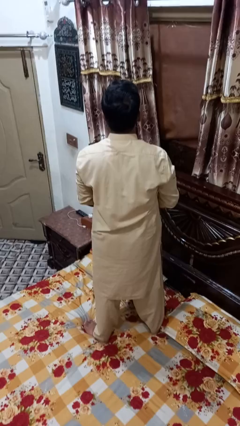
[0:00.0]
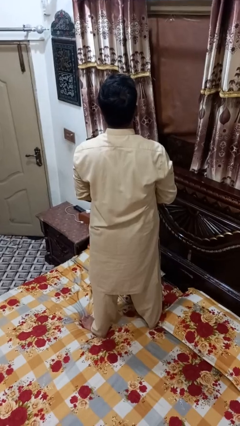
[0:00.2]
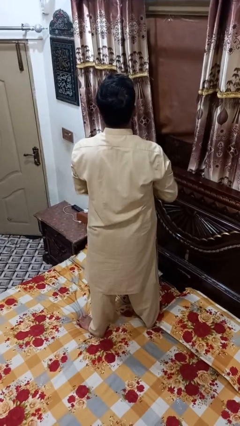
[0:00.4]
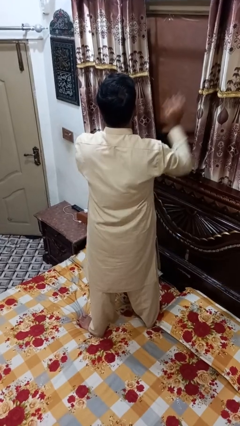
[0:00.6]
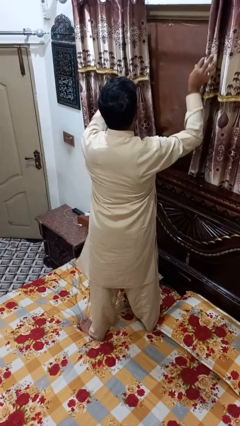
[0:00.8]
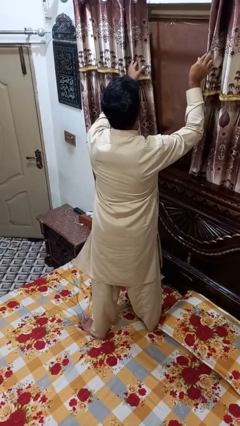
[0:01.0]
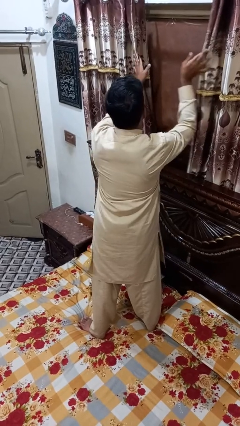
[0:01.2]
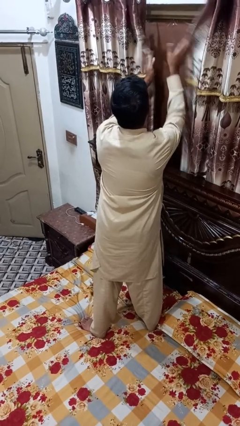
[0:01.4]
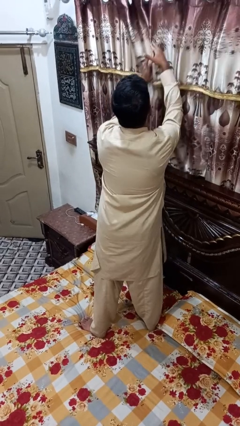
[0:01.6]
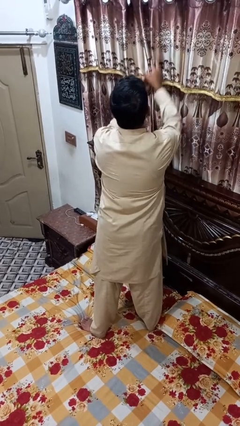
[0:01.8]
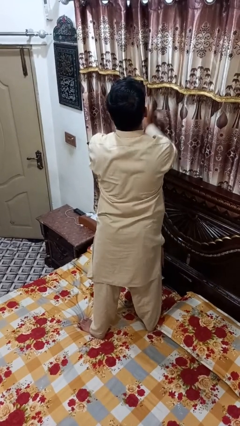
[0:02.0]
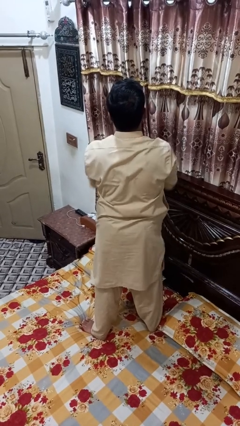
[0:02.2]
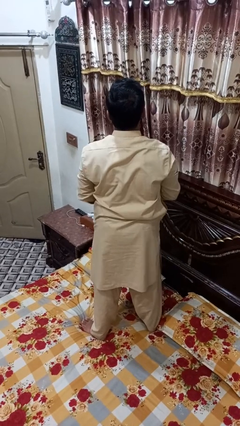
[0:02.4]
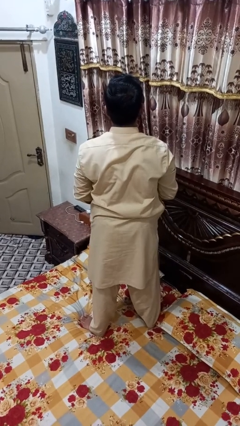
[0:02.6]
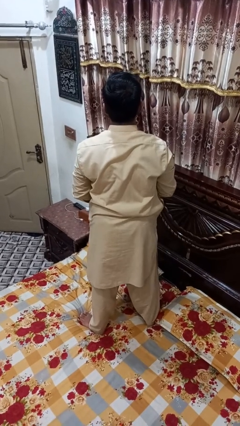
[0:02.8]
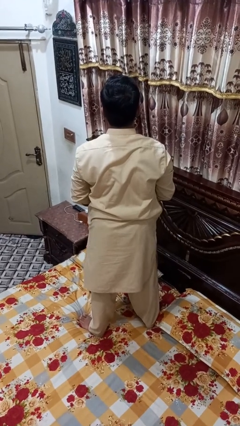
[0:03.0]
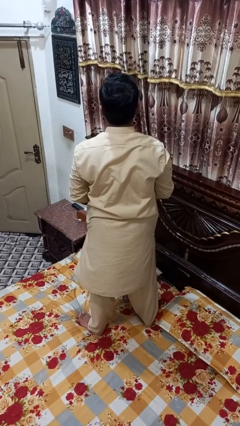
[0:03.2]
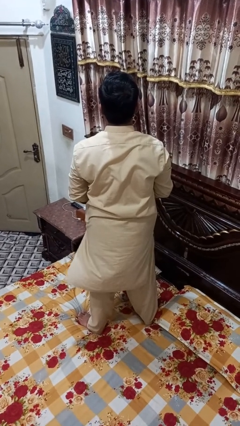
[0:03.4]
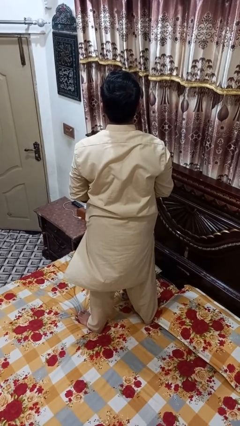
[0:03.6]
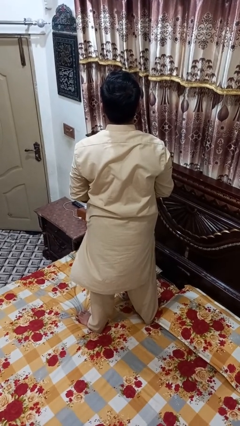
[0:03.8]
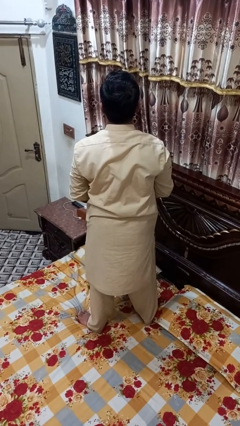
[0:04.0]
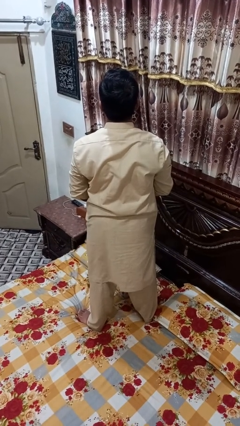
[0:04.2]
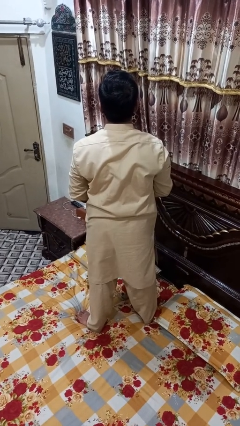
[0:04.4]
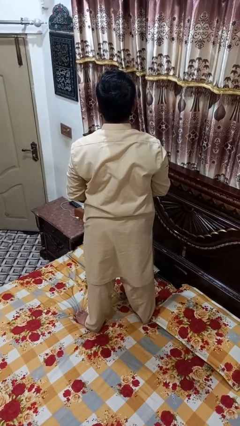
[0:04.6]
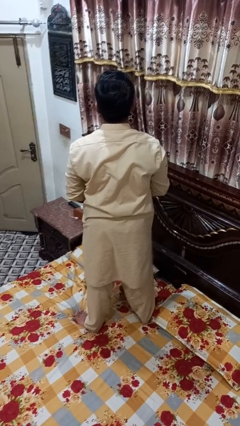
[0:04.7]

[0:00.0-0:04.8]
person closes curtains

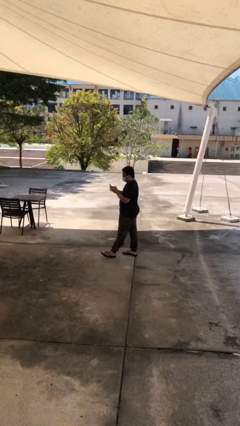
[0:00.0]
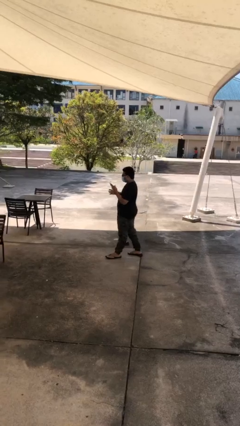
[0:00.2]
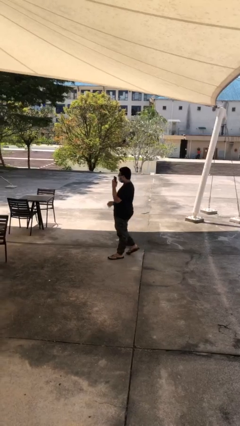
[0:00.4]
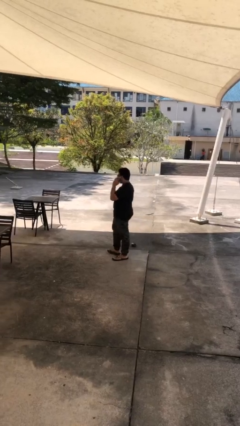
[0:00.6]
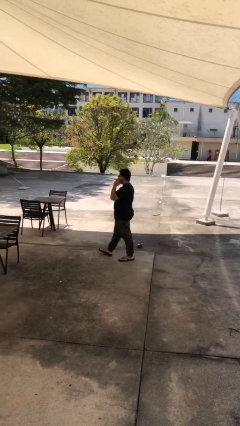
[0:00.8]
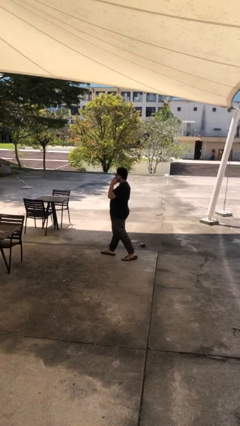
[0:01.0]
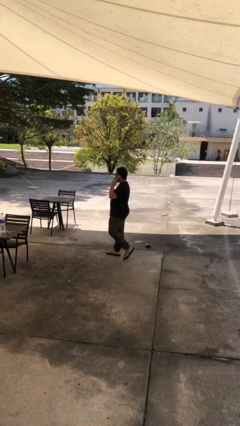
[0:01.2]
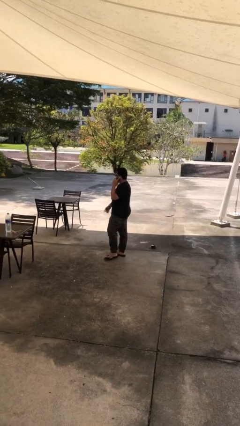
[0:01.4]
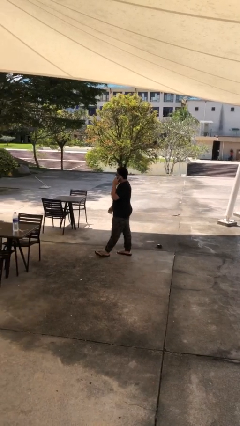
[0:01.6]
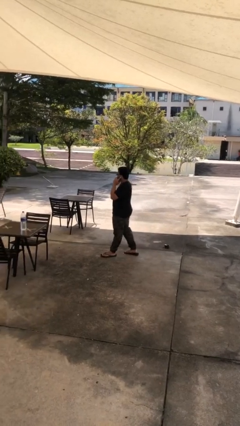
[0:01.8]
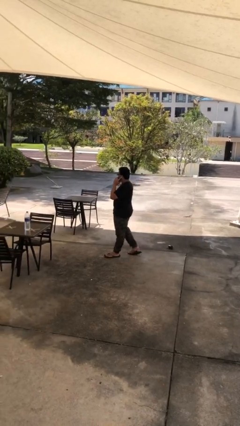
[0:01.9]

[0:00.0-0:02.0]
person talks on phone

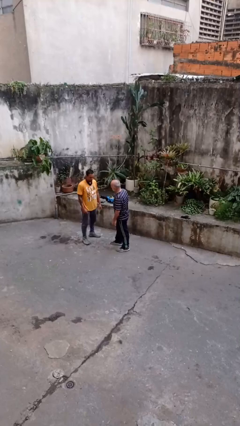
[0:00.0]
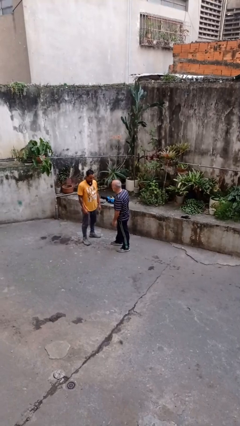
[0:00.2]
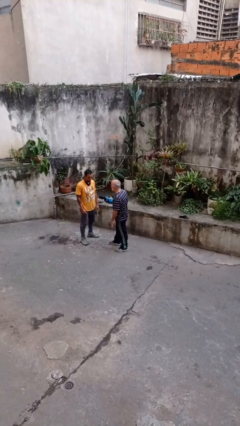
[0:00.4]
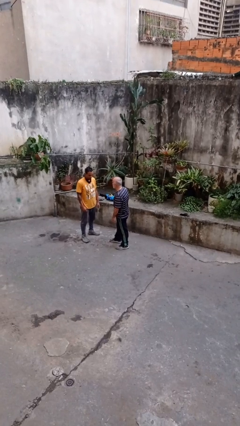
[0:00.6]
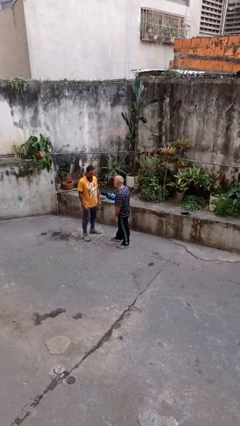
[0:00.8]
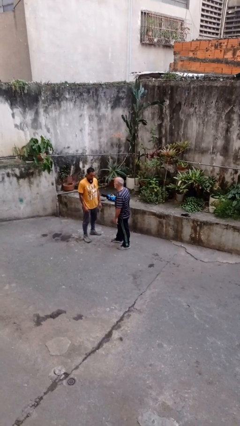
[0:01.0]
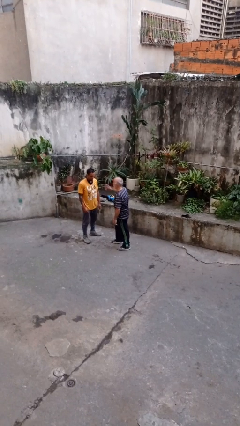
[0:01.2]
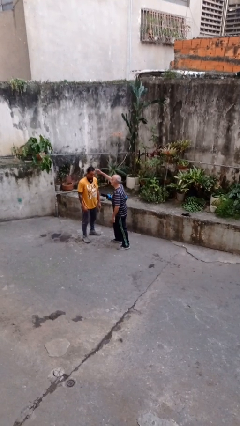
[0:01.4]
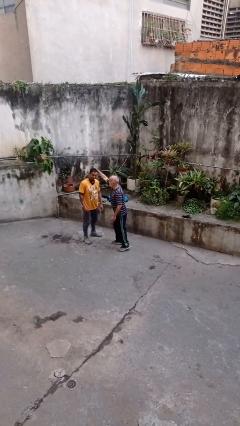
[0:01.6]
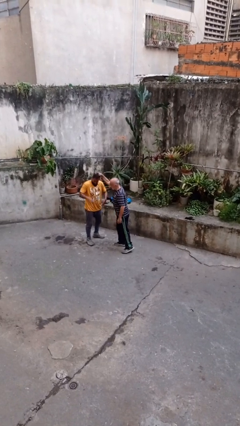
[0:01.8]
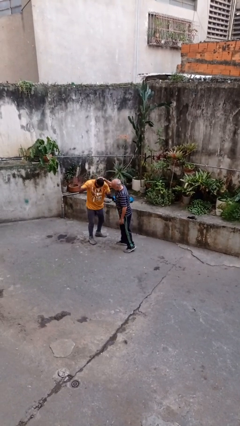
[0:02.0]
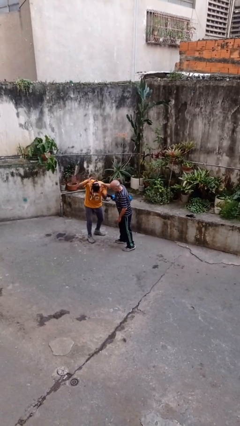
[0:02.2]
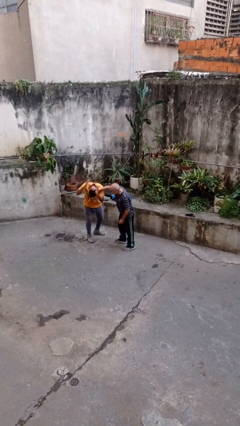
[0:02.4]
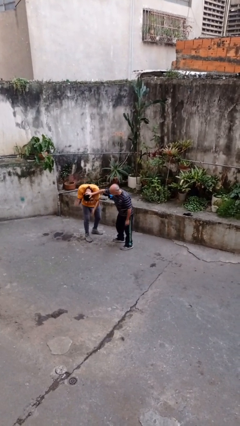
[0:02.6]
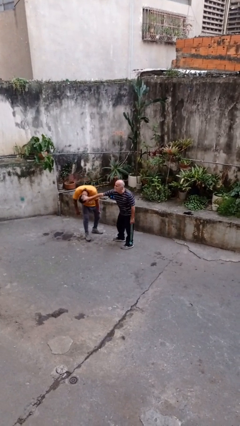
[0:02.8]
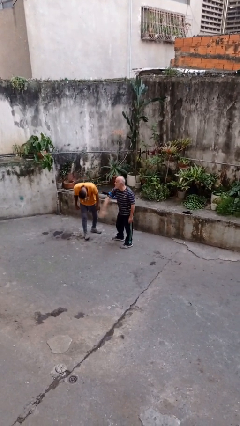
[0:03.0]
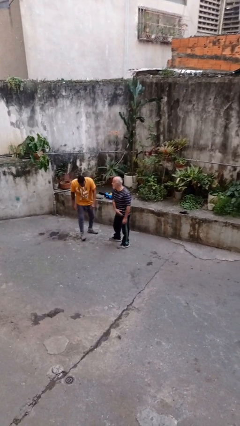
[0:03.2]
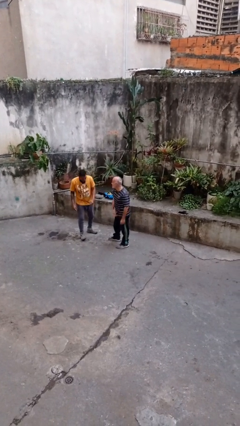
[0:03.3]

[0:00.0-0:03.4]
person grabs person by hair

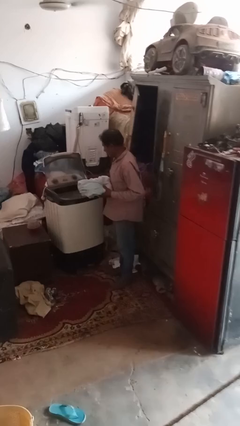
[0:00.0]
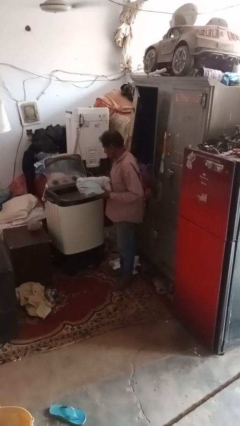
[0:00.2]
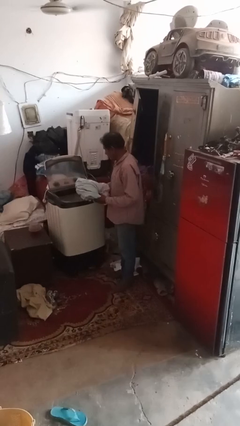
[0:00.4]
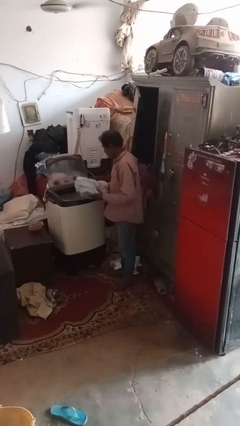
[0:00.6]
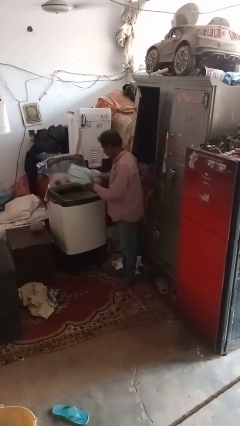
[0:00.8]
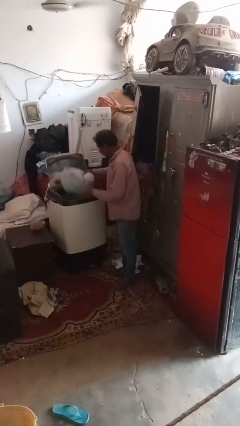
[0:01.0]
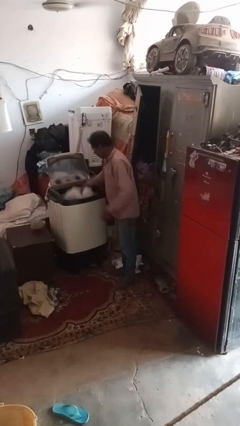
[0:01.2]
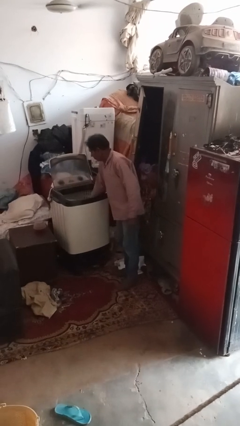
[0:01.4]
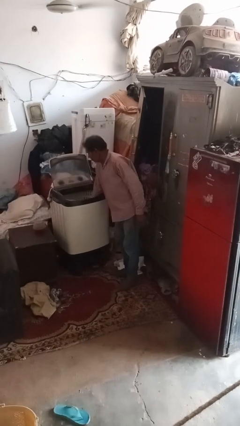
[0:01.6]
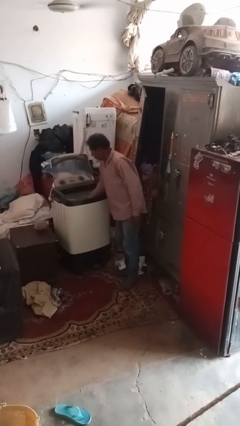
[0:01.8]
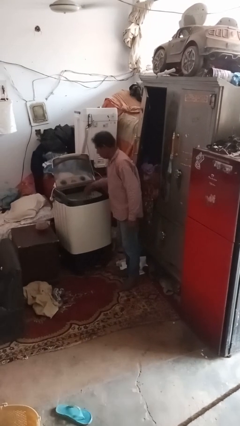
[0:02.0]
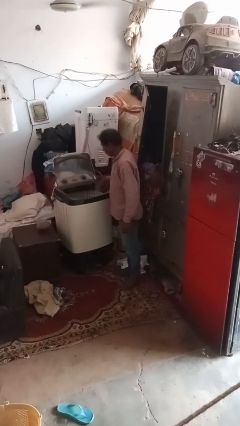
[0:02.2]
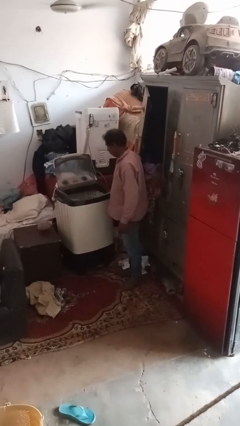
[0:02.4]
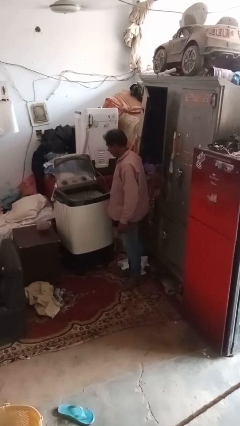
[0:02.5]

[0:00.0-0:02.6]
person loads clotheswasher

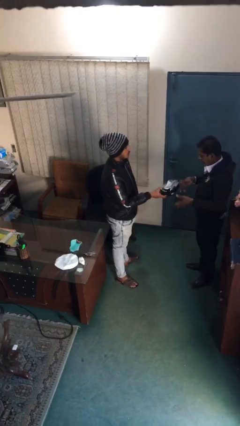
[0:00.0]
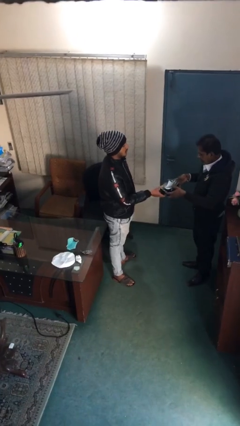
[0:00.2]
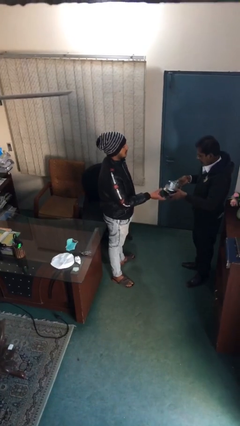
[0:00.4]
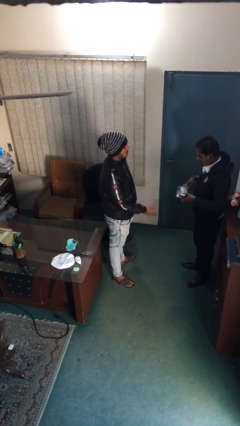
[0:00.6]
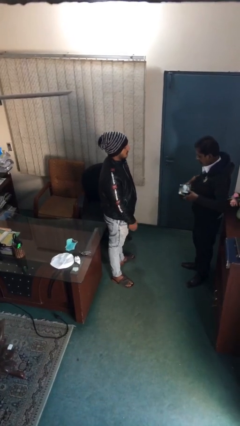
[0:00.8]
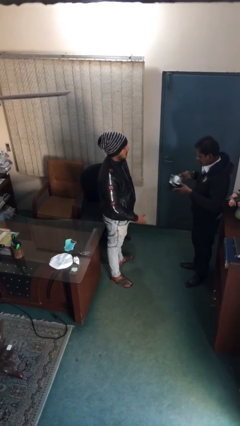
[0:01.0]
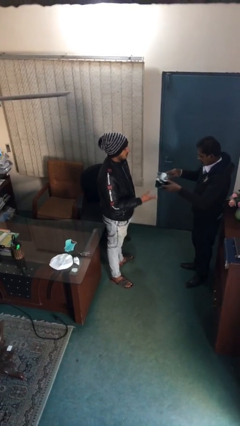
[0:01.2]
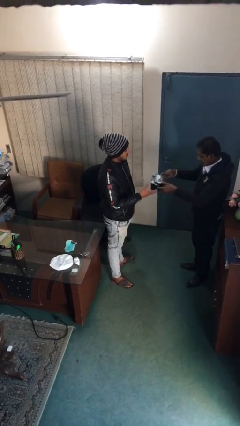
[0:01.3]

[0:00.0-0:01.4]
person transfers object to person

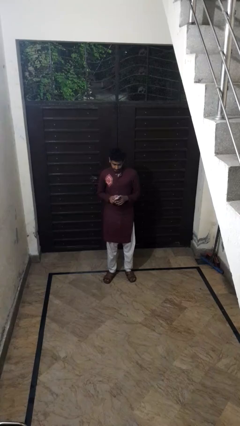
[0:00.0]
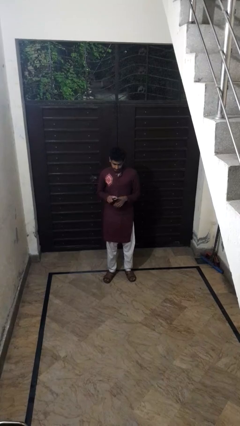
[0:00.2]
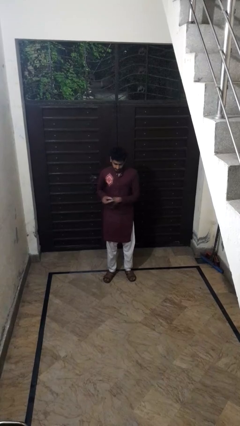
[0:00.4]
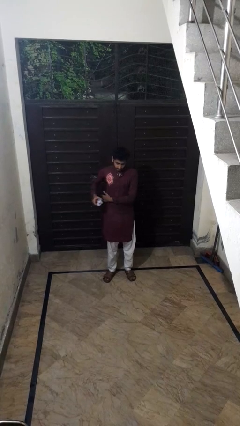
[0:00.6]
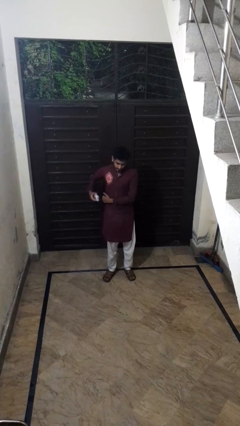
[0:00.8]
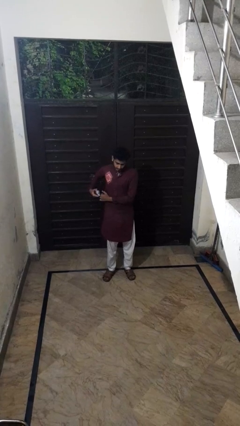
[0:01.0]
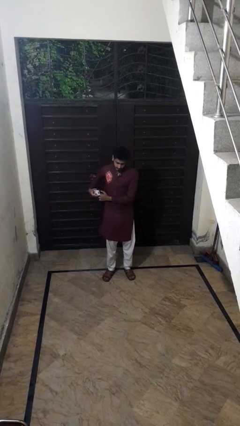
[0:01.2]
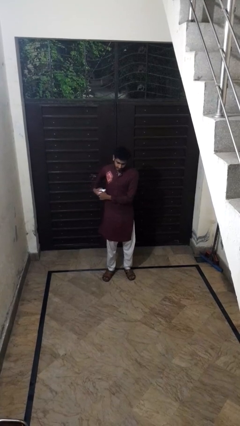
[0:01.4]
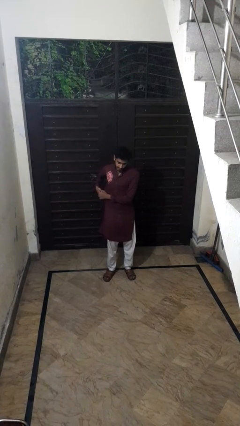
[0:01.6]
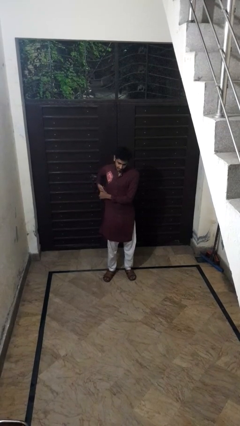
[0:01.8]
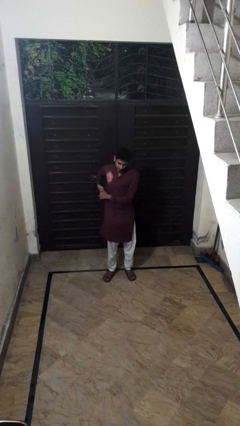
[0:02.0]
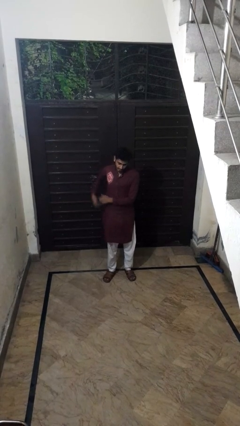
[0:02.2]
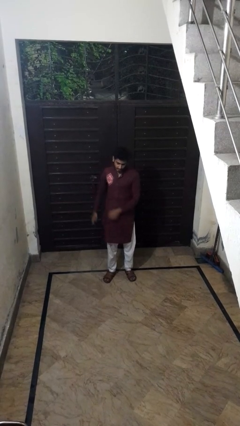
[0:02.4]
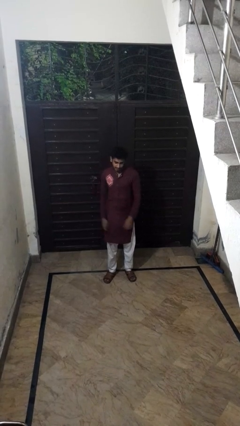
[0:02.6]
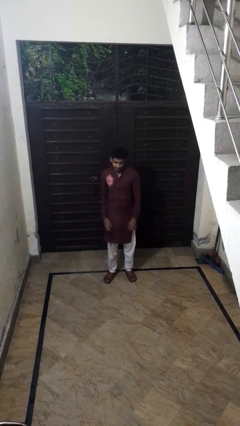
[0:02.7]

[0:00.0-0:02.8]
person puts phone into pocket

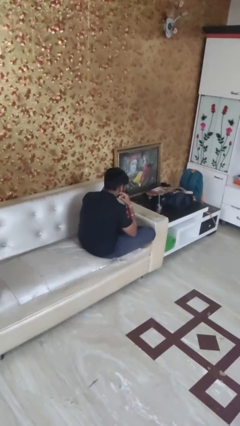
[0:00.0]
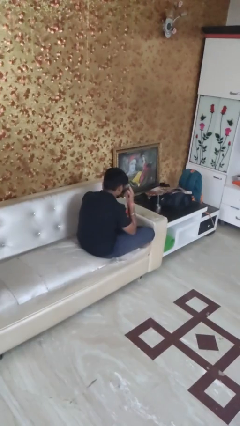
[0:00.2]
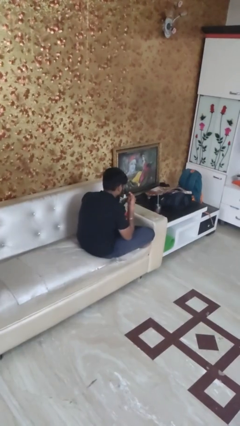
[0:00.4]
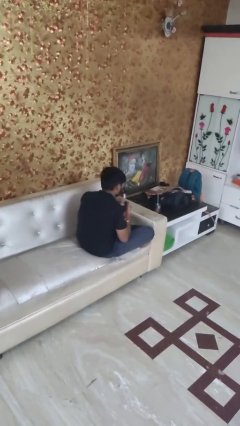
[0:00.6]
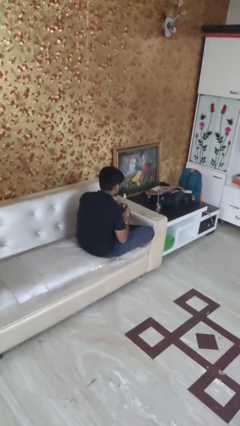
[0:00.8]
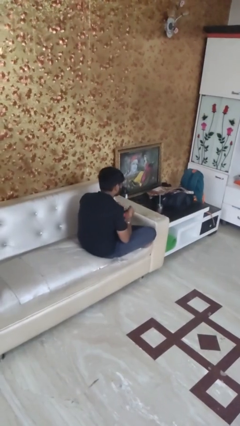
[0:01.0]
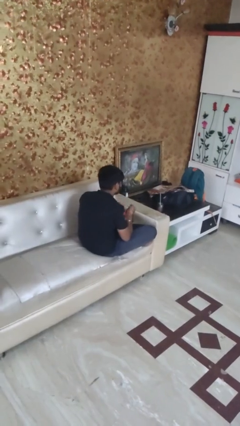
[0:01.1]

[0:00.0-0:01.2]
person takes off facemask
